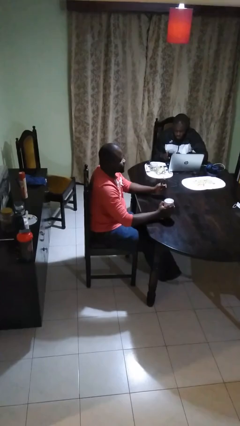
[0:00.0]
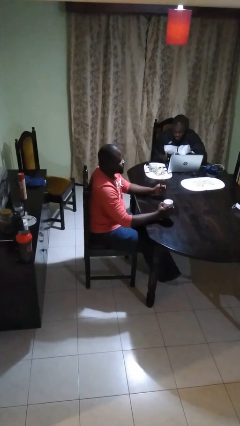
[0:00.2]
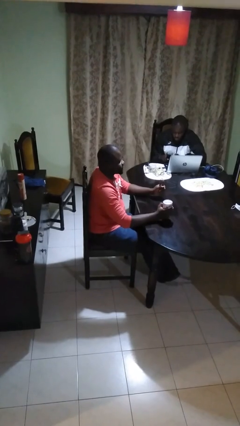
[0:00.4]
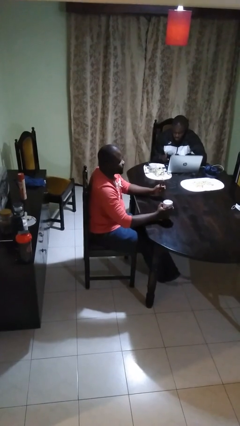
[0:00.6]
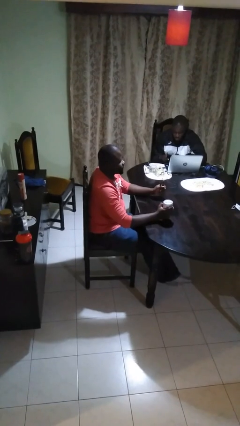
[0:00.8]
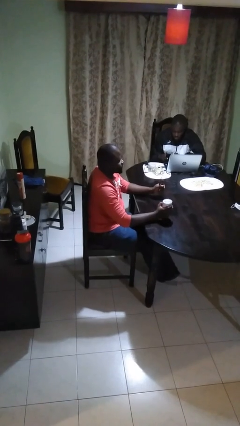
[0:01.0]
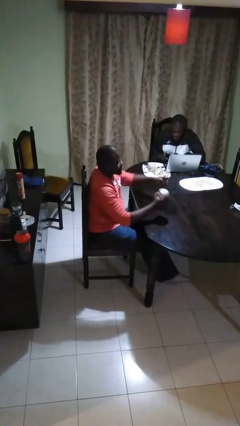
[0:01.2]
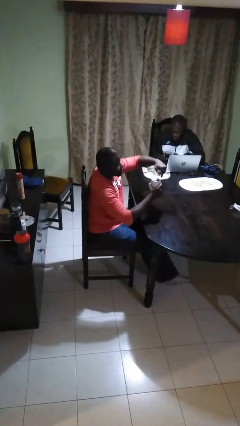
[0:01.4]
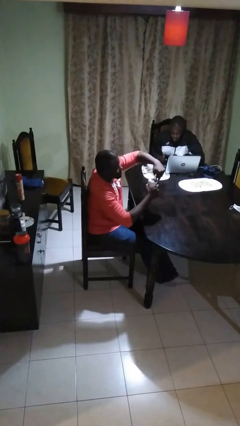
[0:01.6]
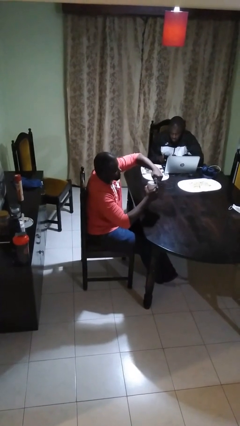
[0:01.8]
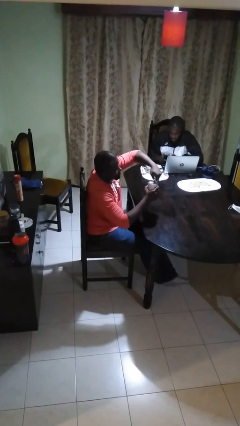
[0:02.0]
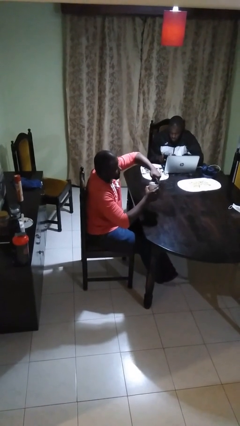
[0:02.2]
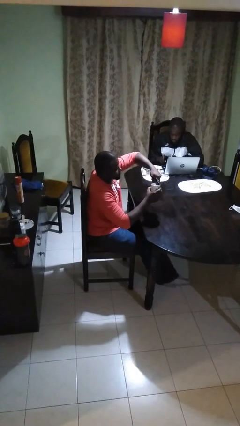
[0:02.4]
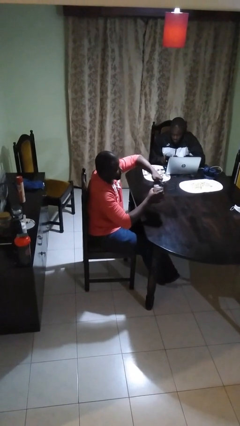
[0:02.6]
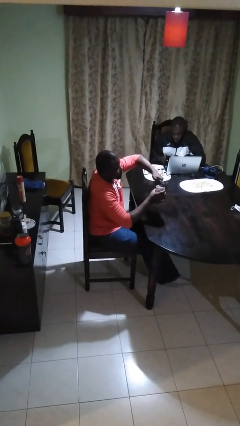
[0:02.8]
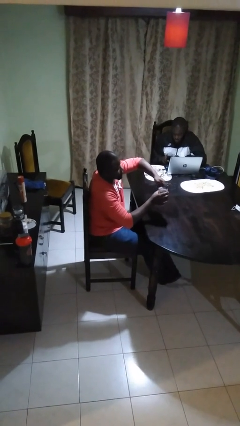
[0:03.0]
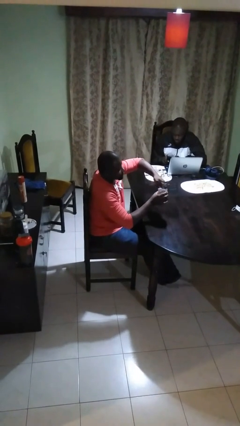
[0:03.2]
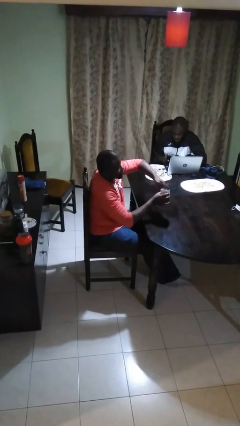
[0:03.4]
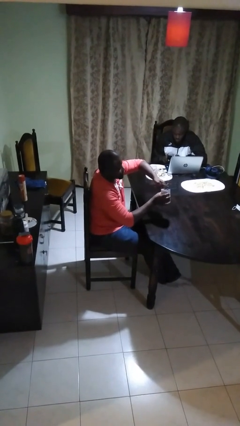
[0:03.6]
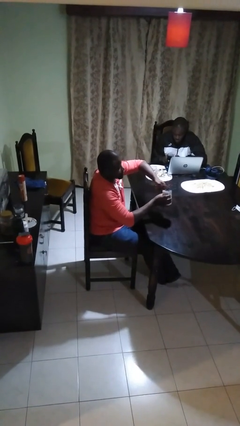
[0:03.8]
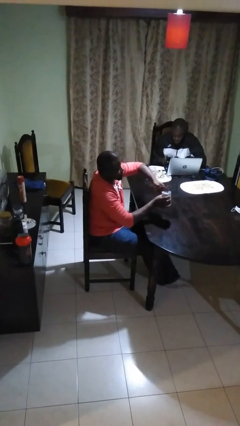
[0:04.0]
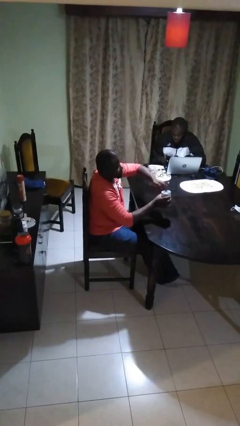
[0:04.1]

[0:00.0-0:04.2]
person opens can with can opener

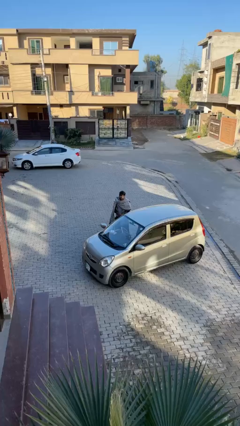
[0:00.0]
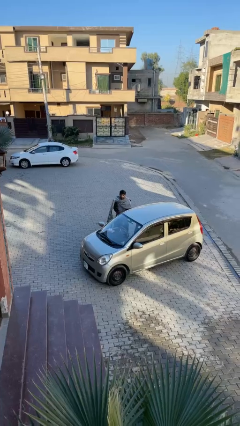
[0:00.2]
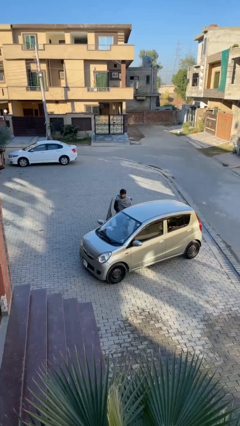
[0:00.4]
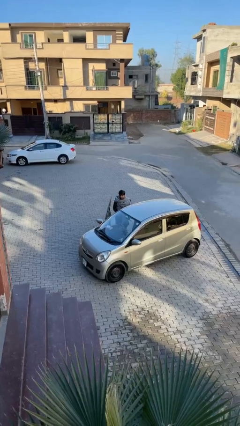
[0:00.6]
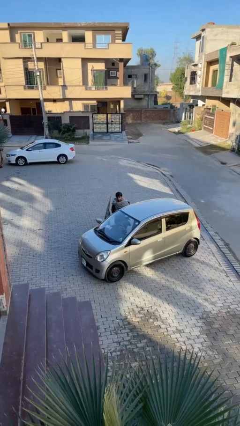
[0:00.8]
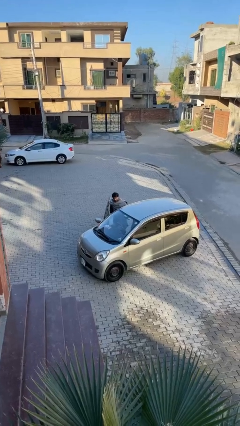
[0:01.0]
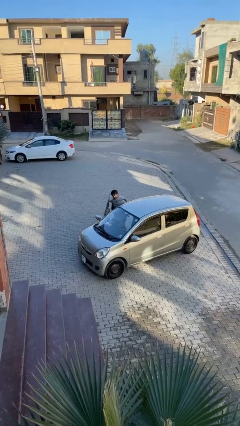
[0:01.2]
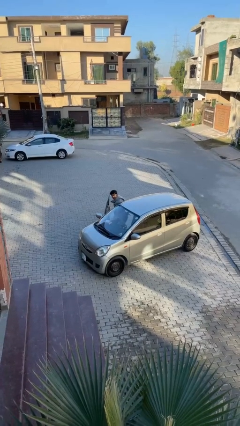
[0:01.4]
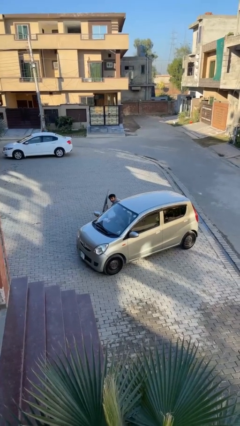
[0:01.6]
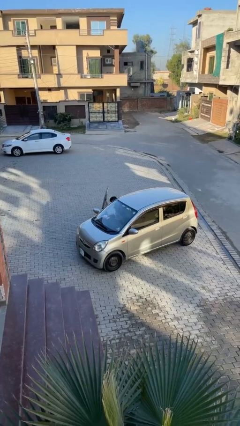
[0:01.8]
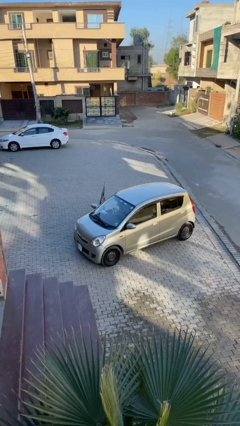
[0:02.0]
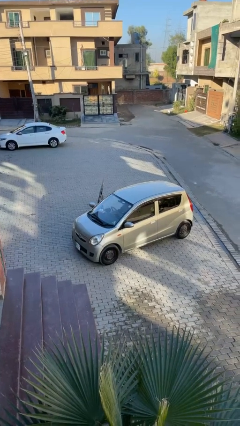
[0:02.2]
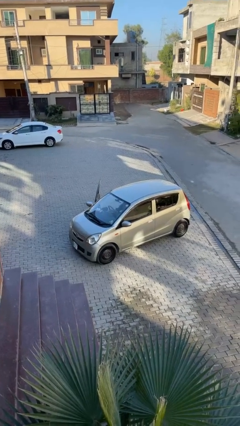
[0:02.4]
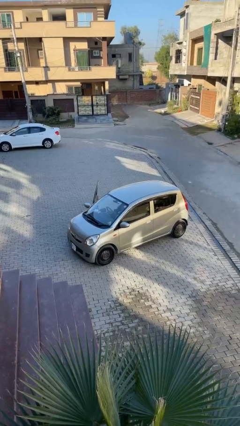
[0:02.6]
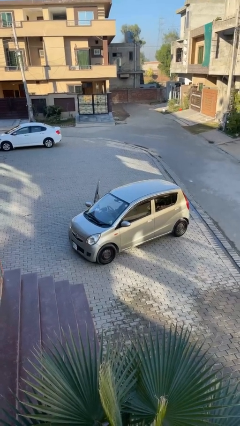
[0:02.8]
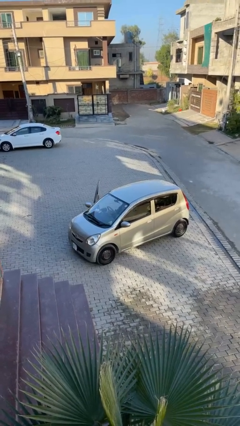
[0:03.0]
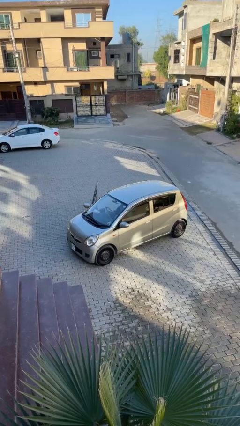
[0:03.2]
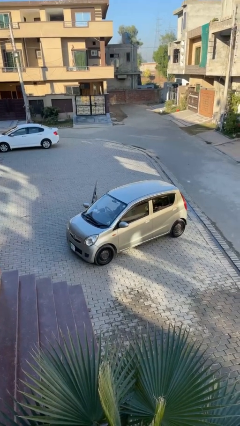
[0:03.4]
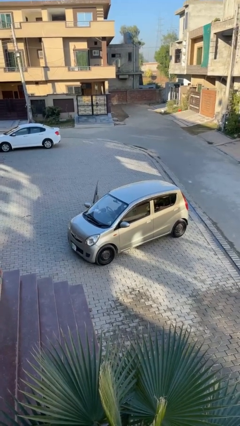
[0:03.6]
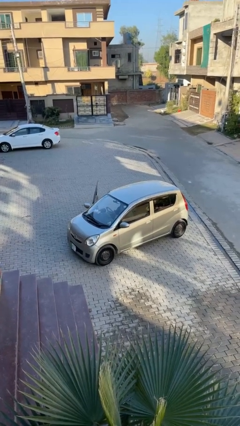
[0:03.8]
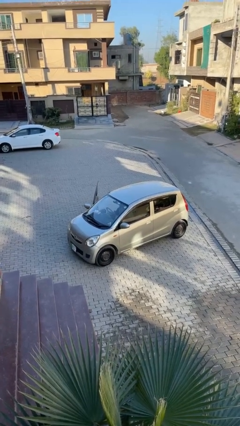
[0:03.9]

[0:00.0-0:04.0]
person enters car

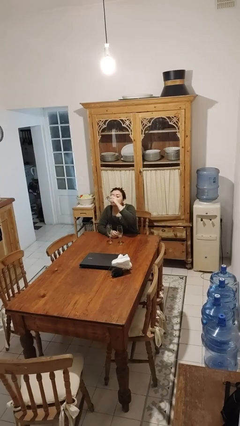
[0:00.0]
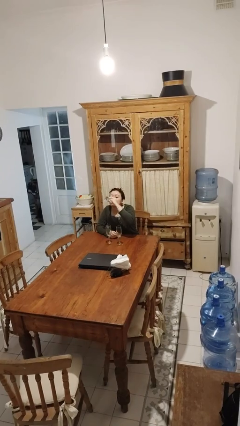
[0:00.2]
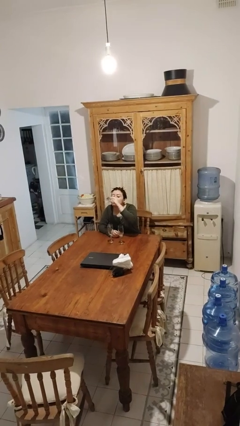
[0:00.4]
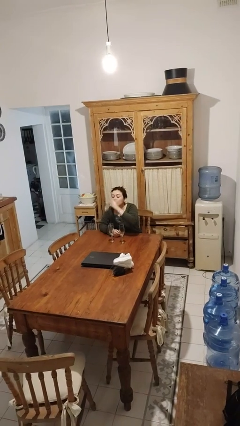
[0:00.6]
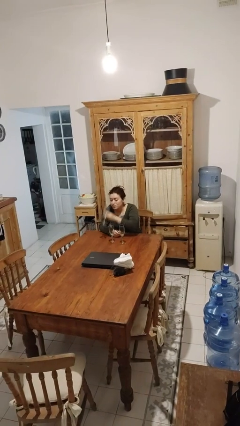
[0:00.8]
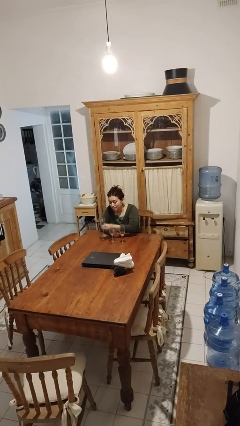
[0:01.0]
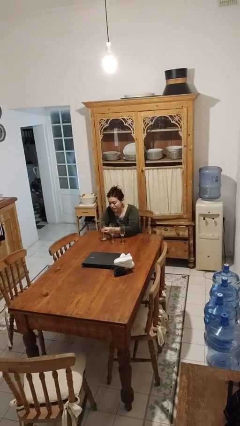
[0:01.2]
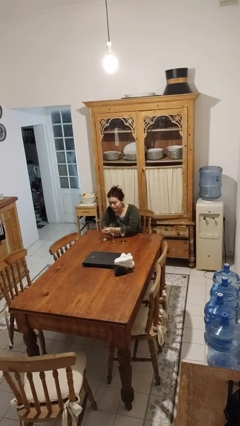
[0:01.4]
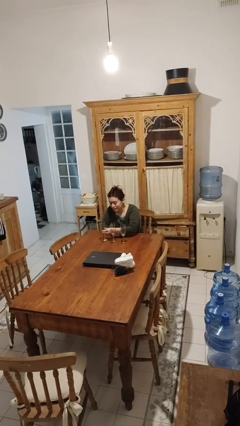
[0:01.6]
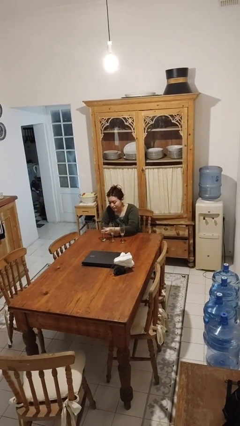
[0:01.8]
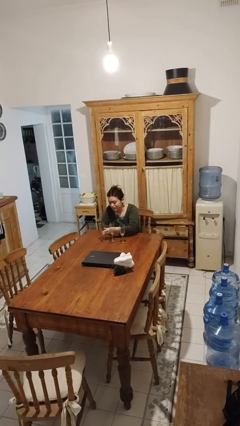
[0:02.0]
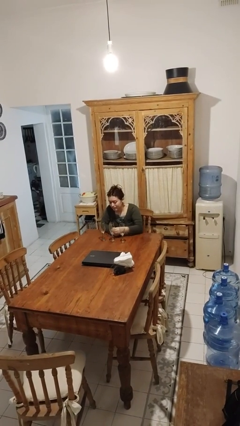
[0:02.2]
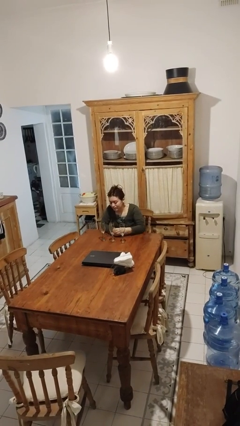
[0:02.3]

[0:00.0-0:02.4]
person puts down object on table

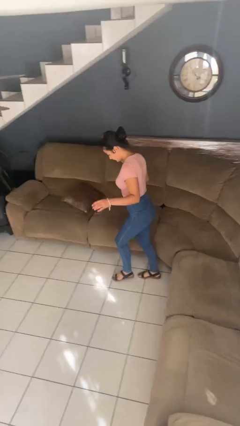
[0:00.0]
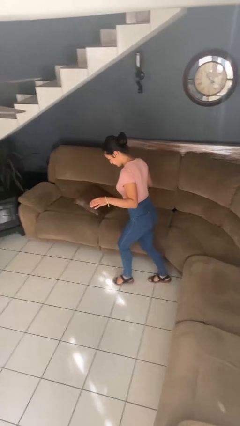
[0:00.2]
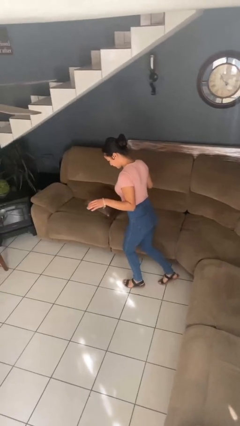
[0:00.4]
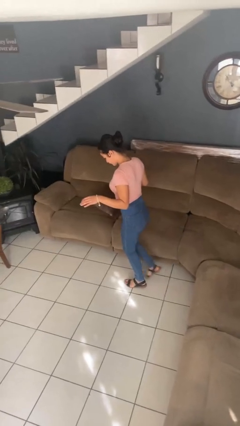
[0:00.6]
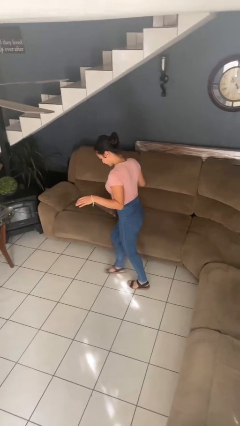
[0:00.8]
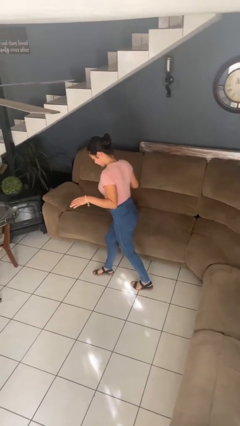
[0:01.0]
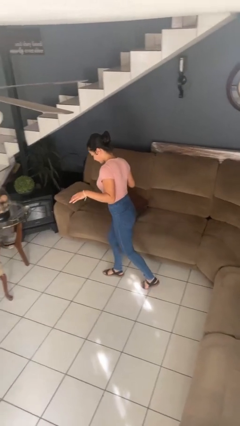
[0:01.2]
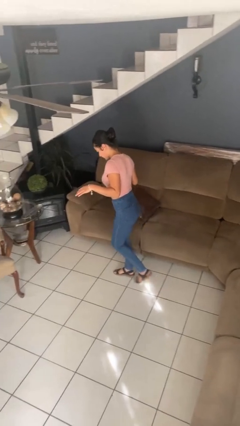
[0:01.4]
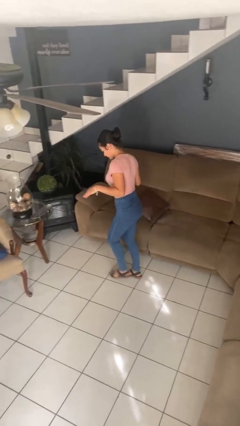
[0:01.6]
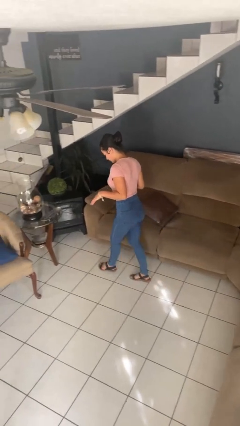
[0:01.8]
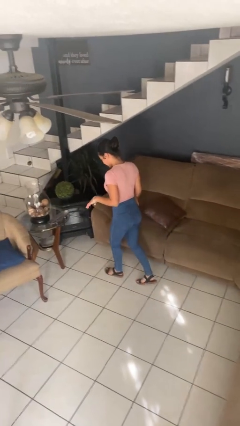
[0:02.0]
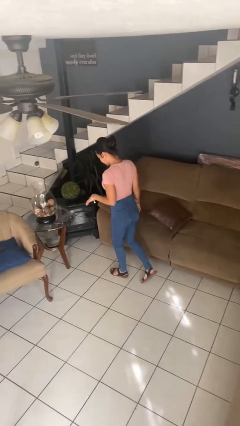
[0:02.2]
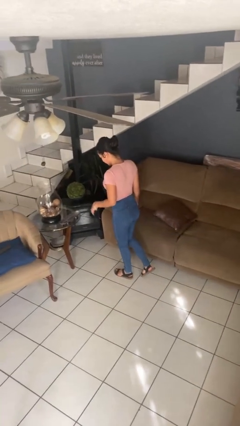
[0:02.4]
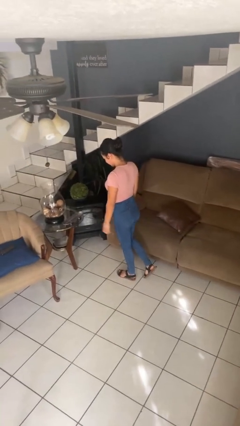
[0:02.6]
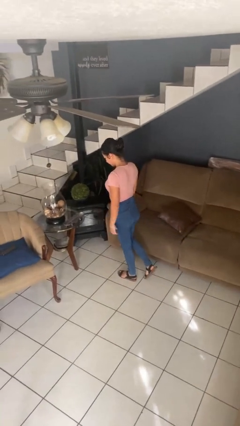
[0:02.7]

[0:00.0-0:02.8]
person walks tiptoe

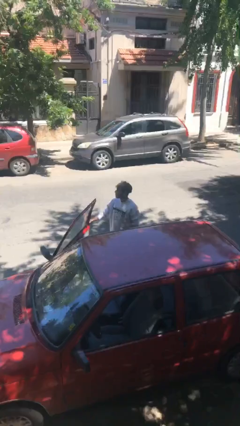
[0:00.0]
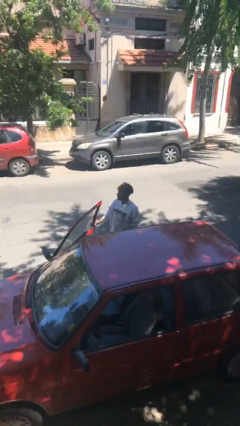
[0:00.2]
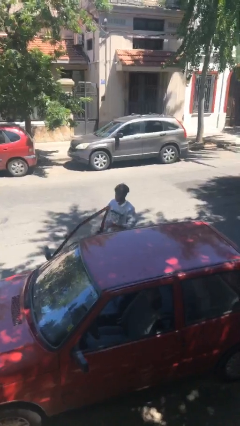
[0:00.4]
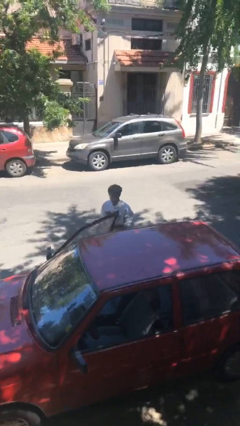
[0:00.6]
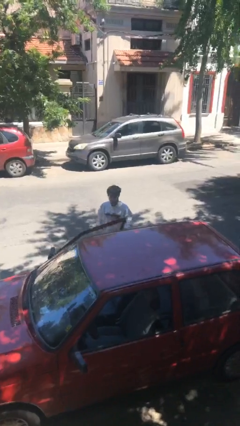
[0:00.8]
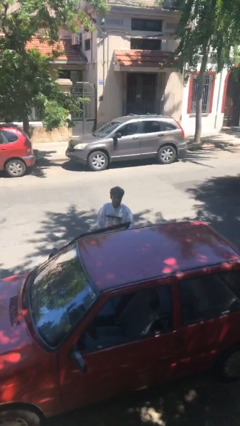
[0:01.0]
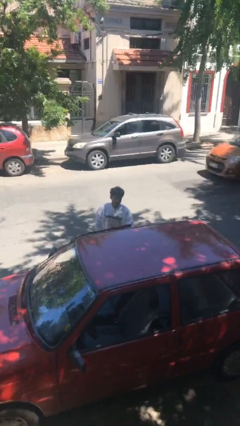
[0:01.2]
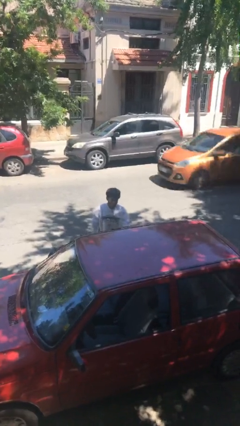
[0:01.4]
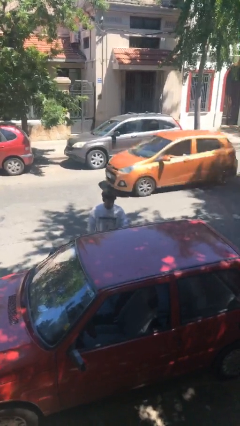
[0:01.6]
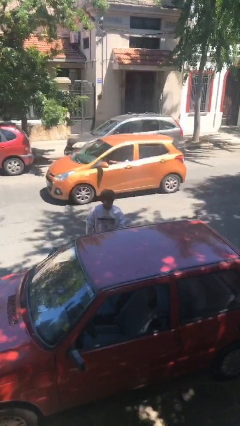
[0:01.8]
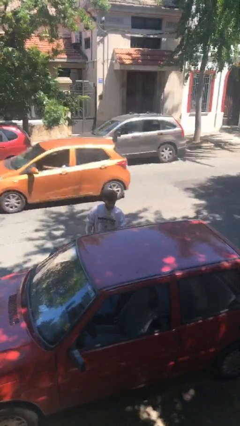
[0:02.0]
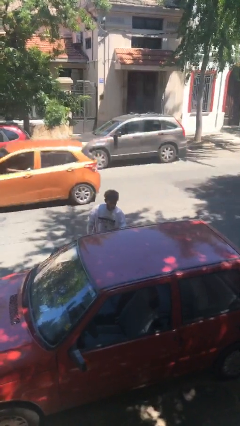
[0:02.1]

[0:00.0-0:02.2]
person closes car door

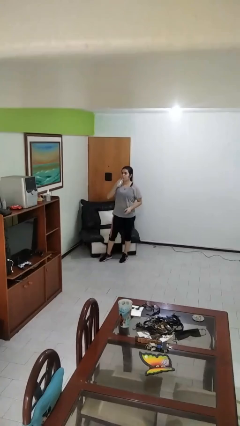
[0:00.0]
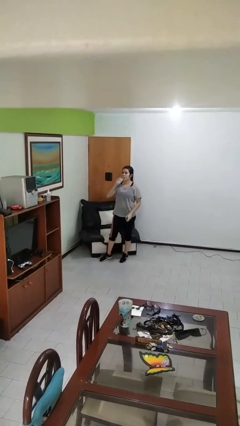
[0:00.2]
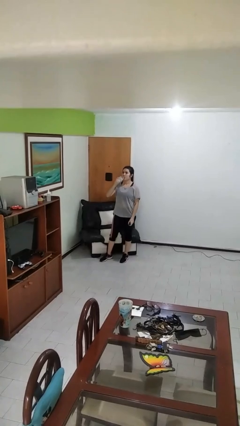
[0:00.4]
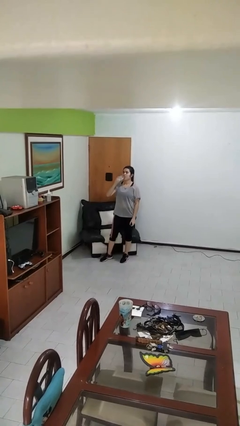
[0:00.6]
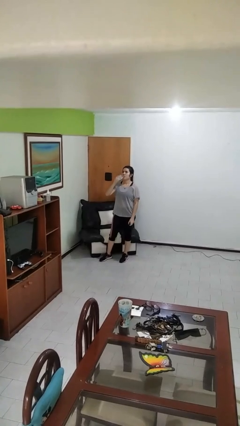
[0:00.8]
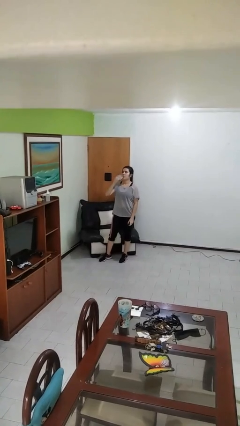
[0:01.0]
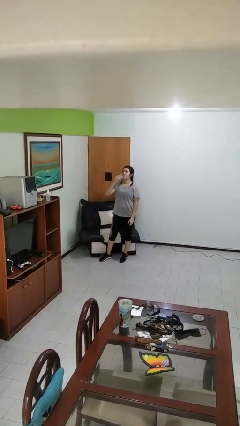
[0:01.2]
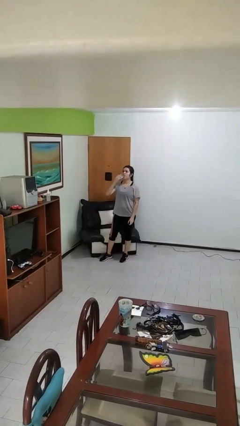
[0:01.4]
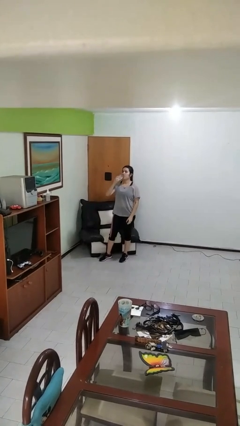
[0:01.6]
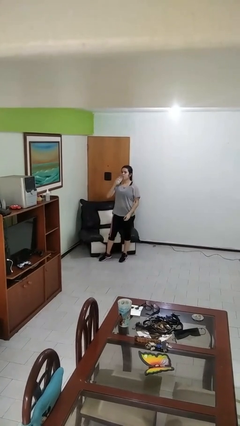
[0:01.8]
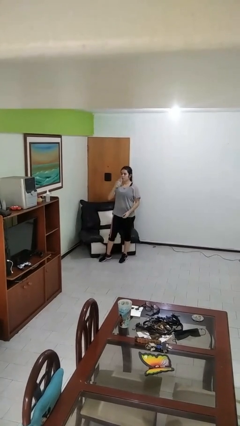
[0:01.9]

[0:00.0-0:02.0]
person drinks from bottle
